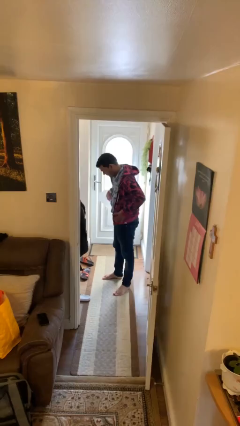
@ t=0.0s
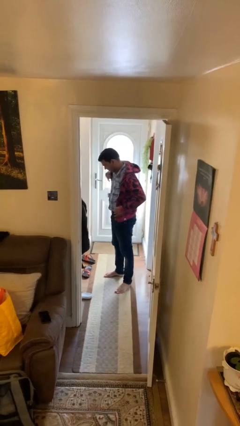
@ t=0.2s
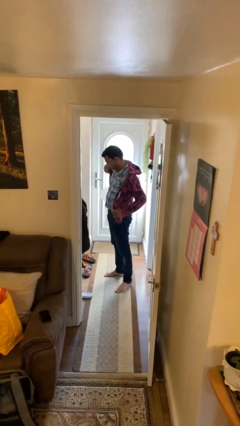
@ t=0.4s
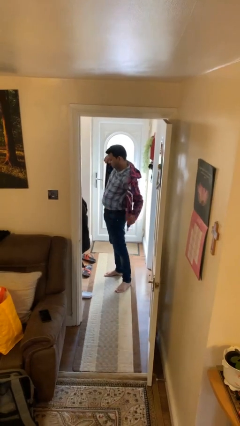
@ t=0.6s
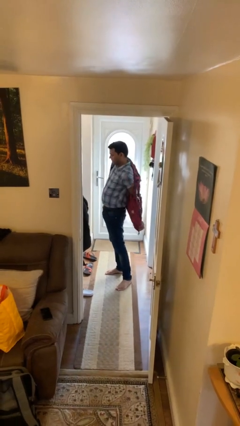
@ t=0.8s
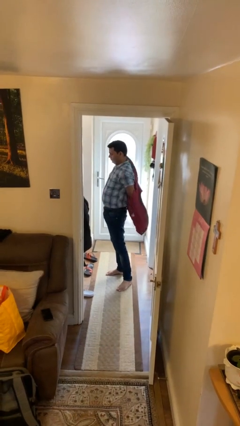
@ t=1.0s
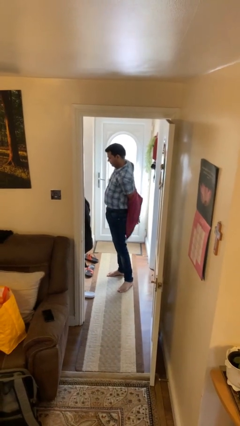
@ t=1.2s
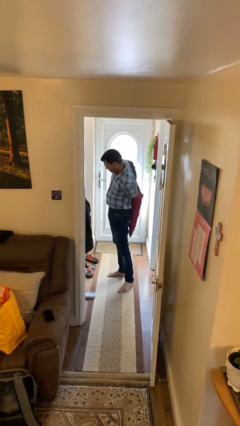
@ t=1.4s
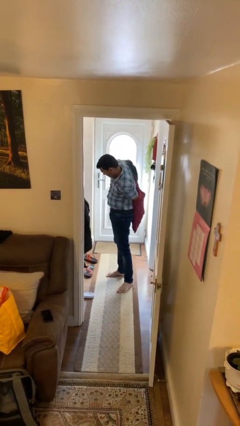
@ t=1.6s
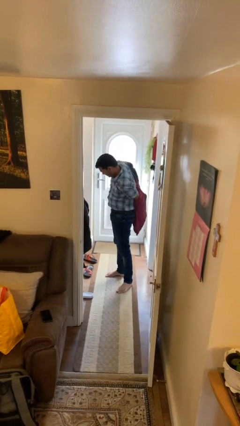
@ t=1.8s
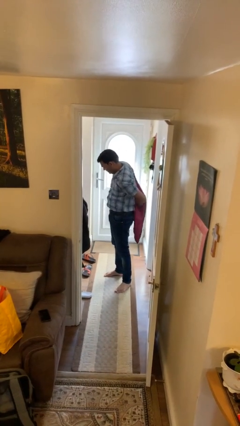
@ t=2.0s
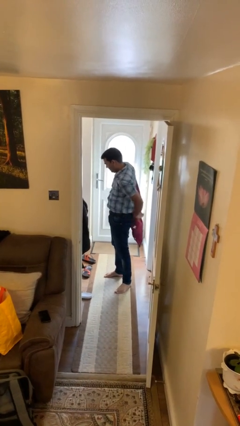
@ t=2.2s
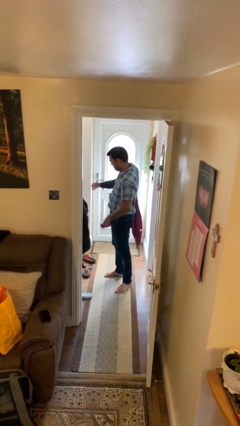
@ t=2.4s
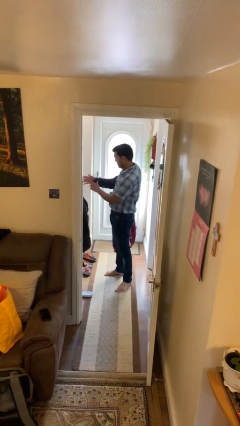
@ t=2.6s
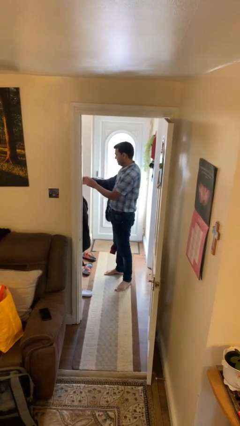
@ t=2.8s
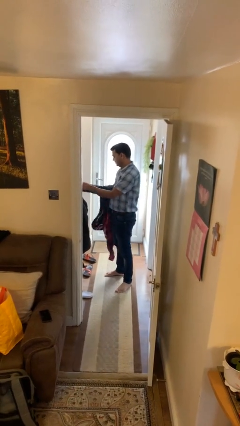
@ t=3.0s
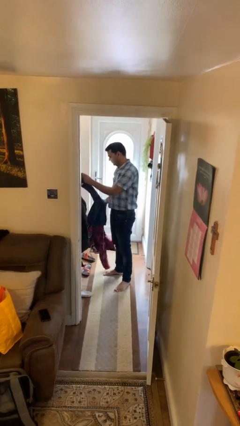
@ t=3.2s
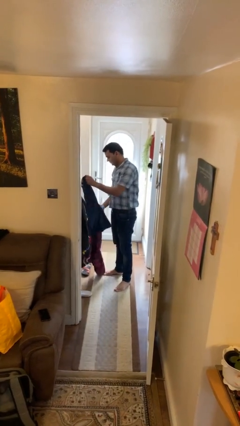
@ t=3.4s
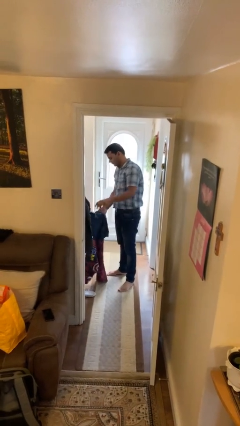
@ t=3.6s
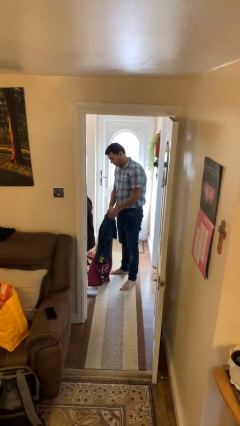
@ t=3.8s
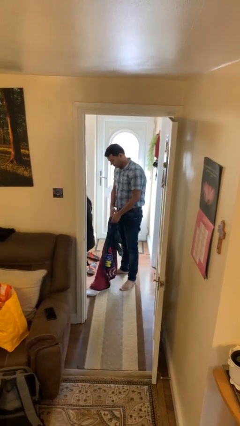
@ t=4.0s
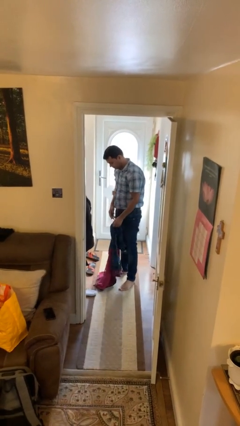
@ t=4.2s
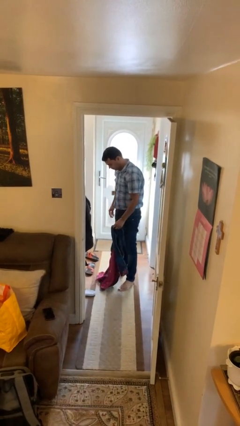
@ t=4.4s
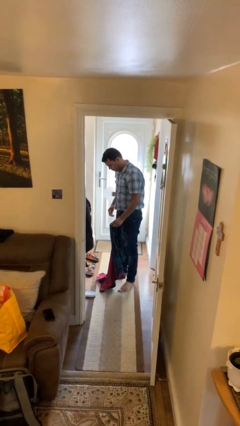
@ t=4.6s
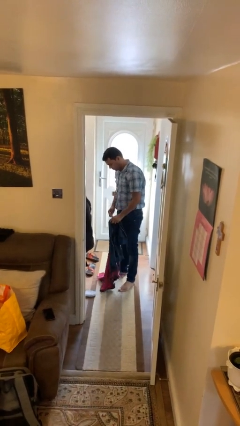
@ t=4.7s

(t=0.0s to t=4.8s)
person takes off hoodie

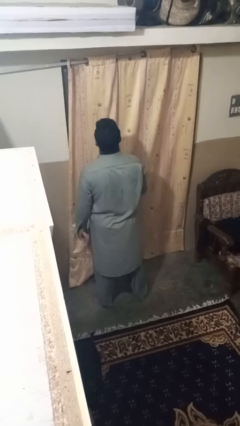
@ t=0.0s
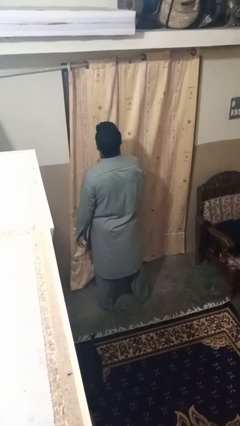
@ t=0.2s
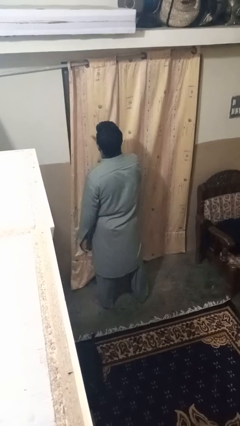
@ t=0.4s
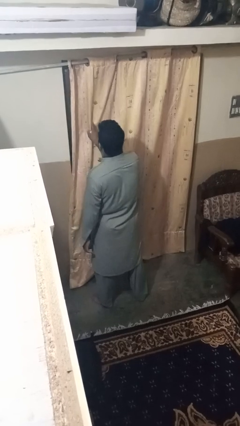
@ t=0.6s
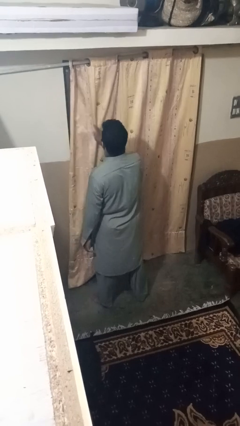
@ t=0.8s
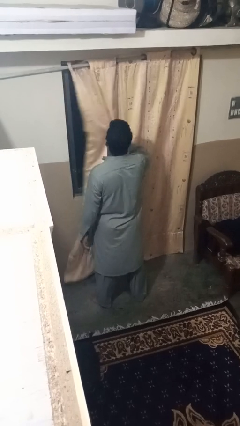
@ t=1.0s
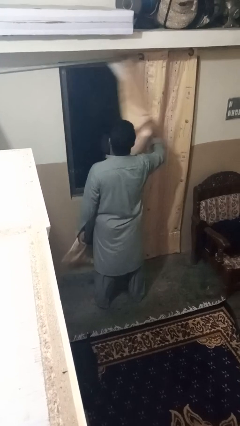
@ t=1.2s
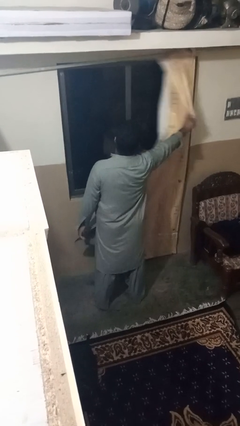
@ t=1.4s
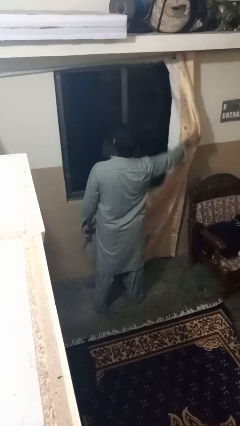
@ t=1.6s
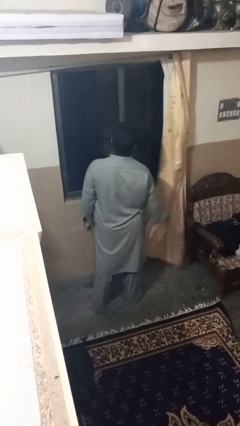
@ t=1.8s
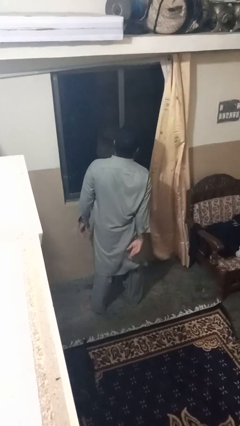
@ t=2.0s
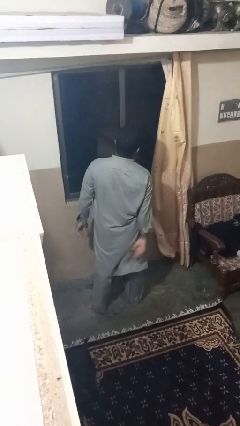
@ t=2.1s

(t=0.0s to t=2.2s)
person opens curtains

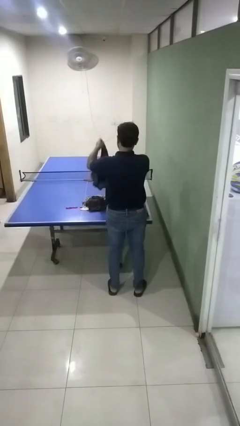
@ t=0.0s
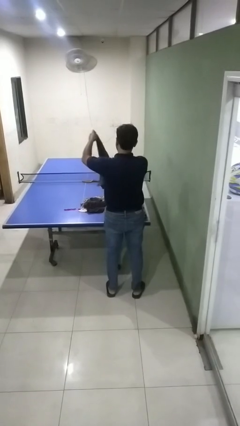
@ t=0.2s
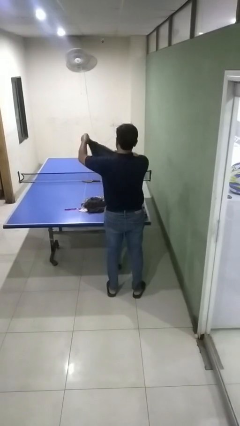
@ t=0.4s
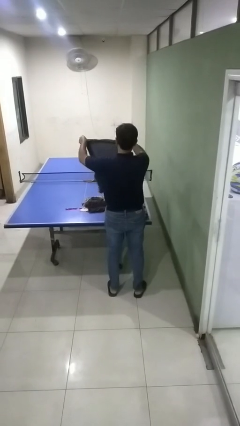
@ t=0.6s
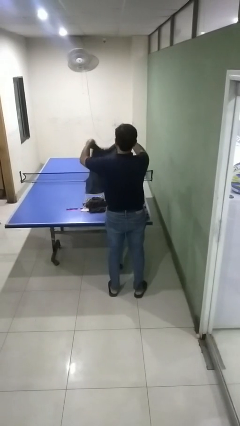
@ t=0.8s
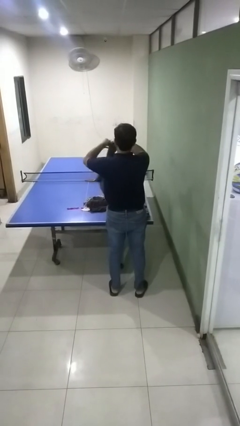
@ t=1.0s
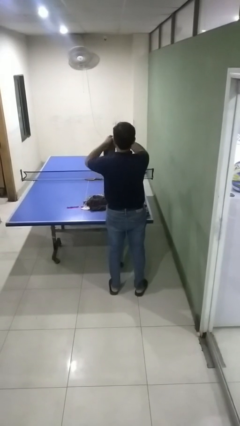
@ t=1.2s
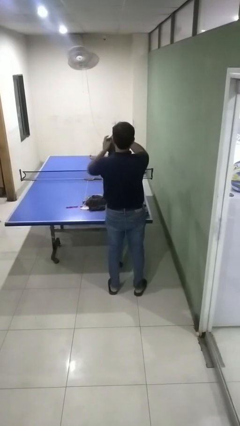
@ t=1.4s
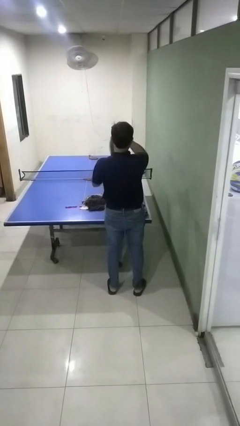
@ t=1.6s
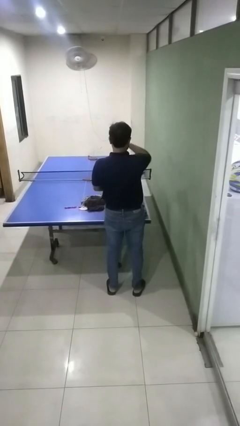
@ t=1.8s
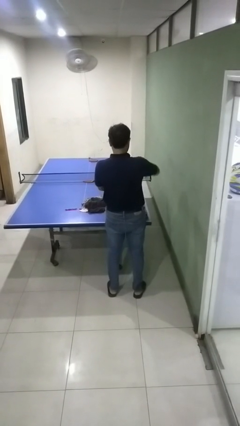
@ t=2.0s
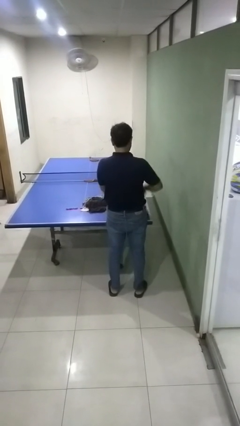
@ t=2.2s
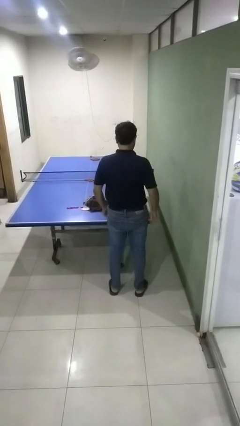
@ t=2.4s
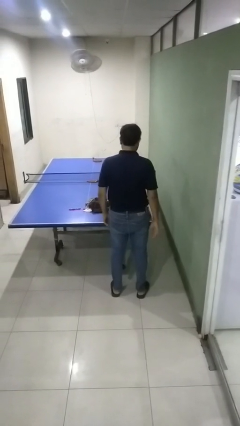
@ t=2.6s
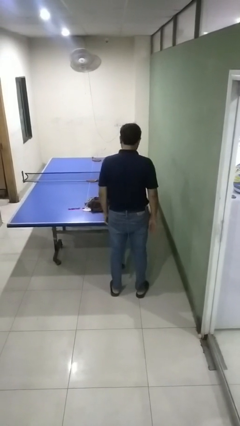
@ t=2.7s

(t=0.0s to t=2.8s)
person folds shirt

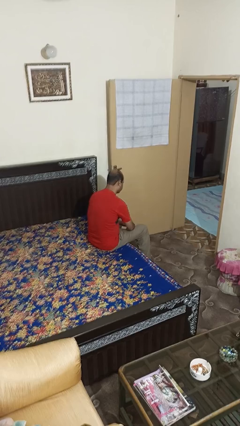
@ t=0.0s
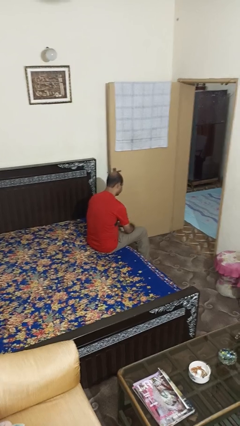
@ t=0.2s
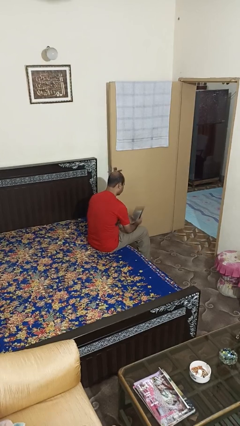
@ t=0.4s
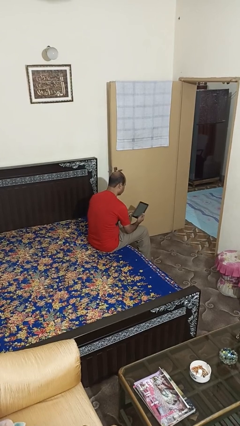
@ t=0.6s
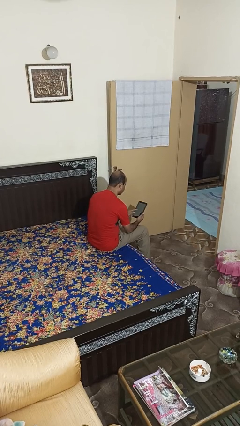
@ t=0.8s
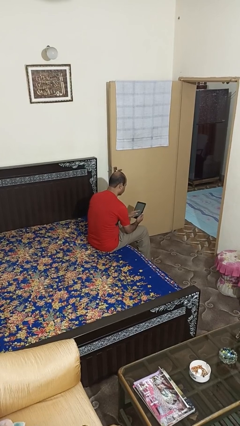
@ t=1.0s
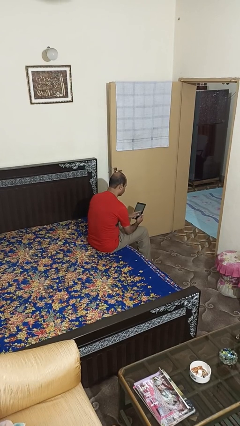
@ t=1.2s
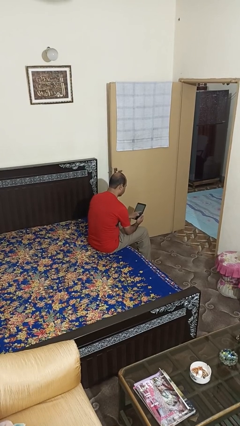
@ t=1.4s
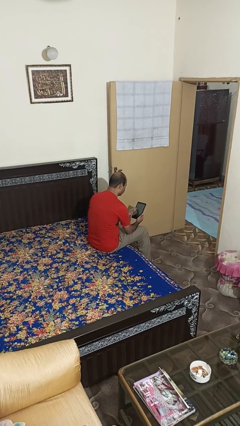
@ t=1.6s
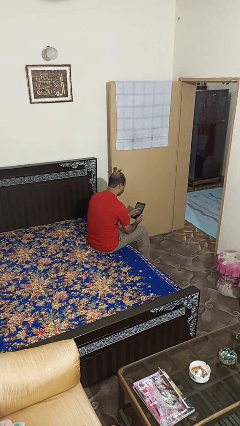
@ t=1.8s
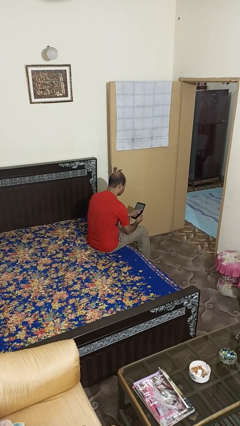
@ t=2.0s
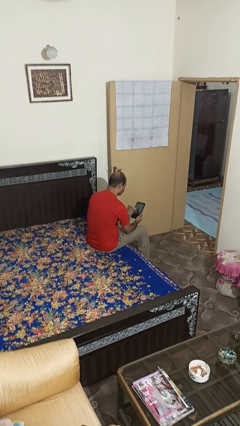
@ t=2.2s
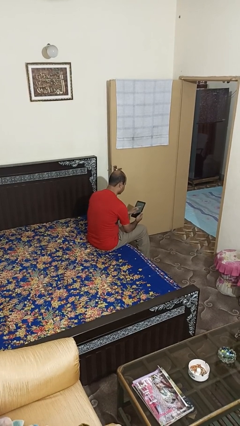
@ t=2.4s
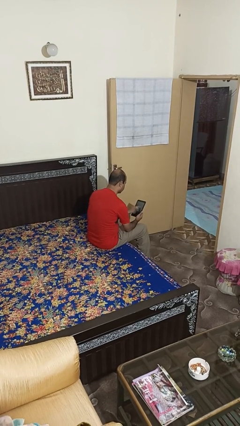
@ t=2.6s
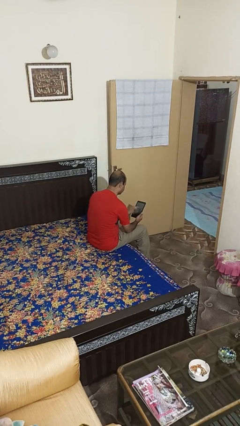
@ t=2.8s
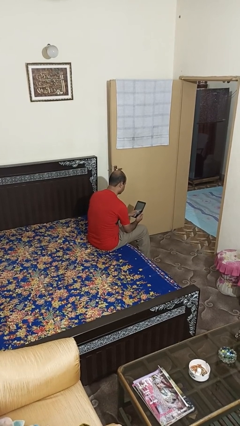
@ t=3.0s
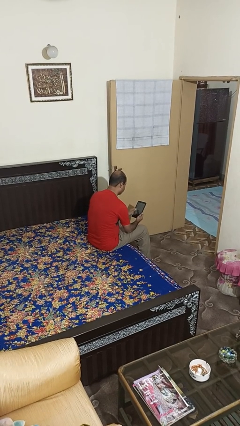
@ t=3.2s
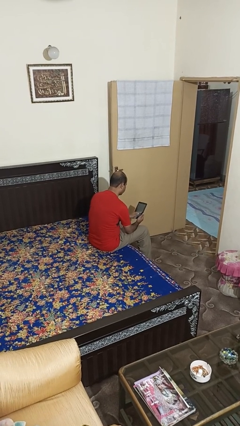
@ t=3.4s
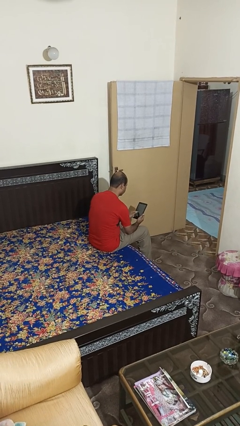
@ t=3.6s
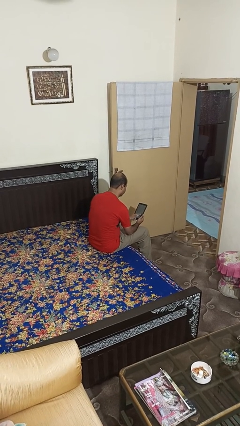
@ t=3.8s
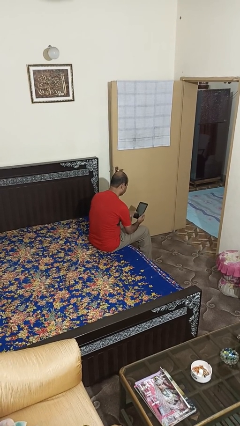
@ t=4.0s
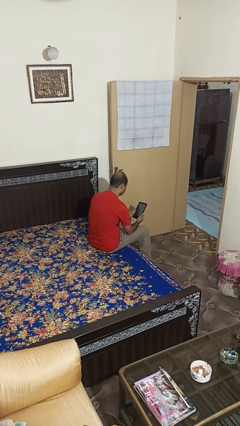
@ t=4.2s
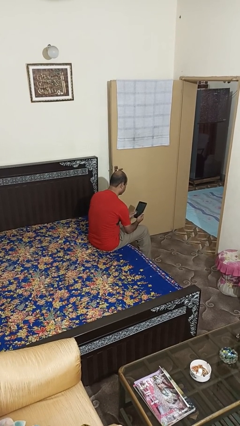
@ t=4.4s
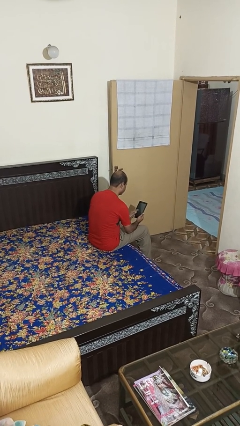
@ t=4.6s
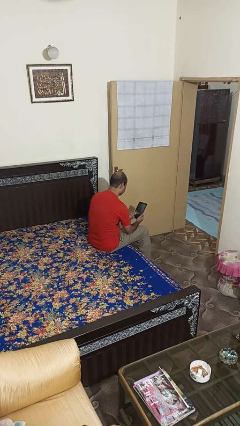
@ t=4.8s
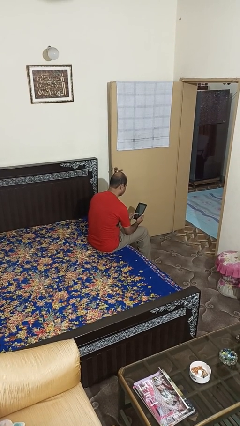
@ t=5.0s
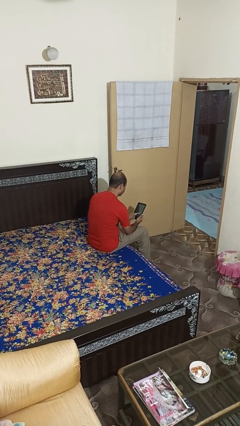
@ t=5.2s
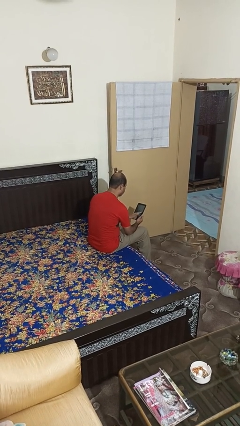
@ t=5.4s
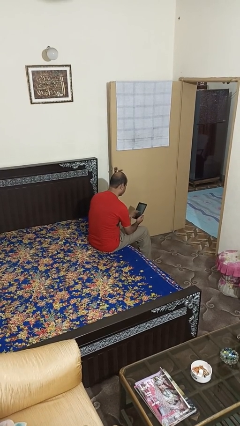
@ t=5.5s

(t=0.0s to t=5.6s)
person interacts with tablet

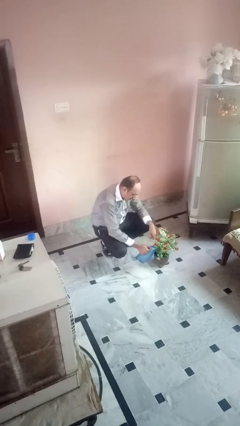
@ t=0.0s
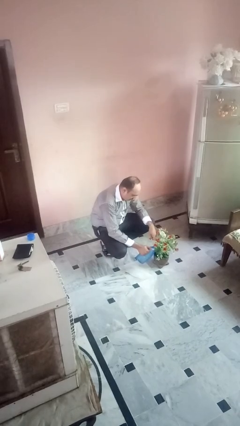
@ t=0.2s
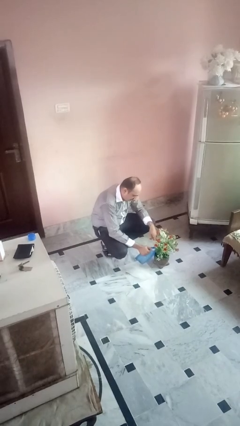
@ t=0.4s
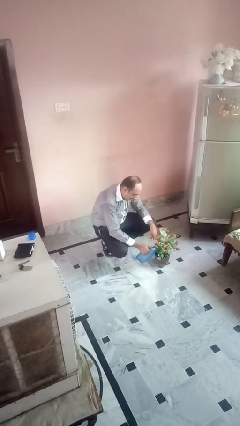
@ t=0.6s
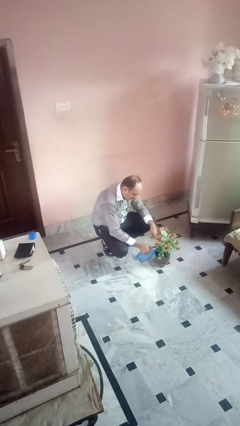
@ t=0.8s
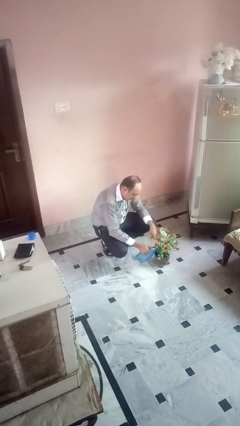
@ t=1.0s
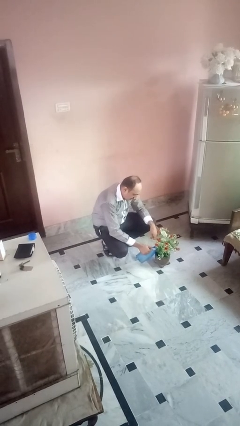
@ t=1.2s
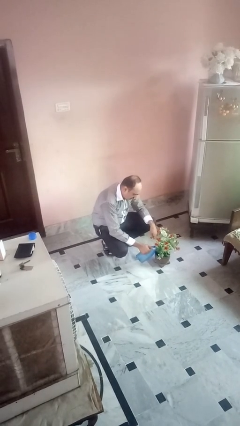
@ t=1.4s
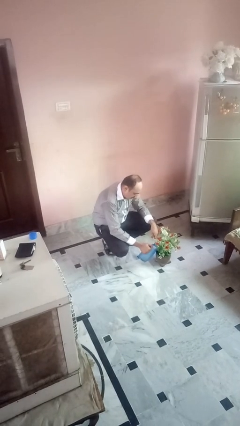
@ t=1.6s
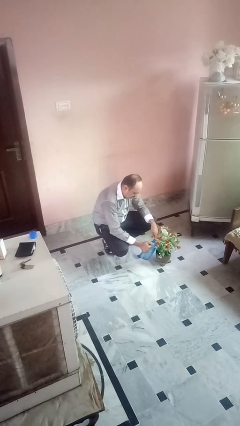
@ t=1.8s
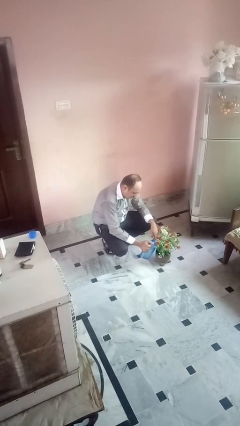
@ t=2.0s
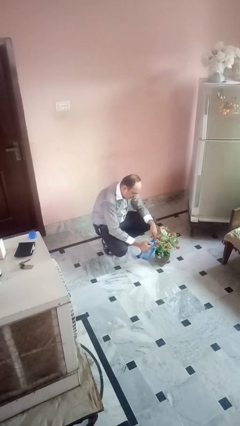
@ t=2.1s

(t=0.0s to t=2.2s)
person waters houseplant
